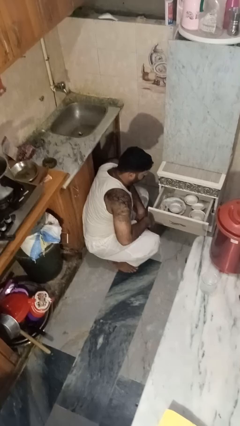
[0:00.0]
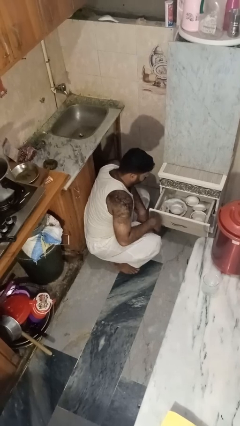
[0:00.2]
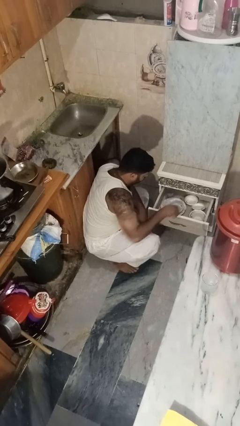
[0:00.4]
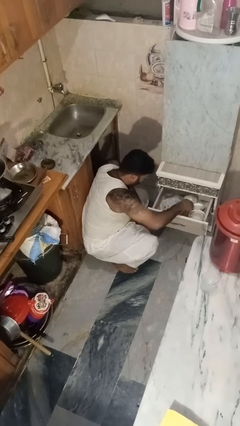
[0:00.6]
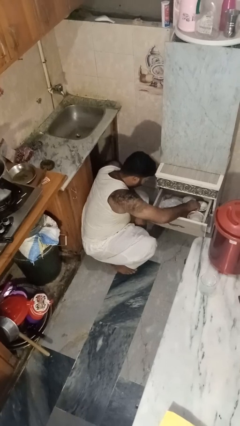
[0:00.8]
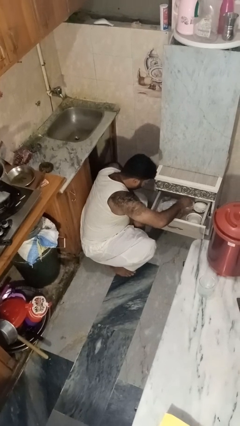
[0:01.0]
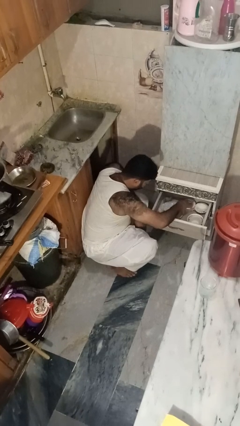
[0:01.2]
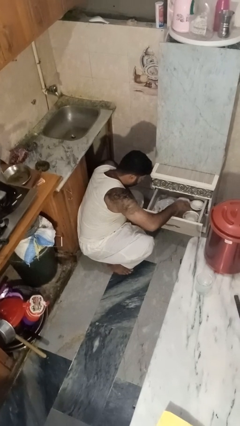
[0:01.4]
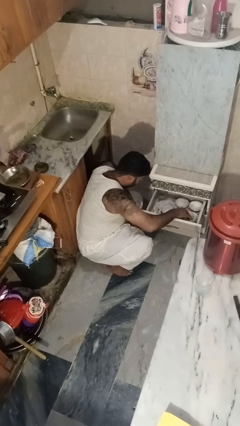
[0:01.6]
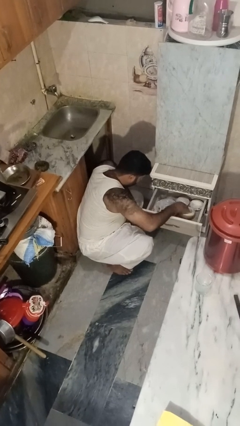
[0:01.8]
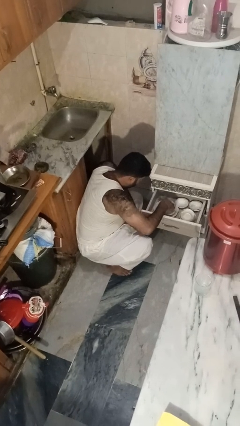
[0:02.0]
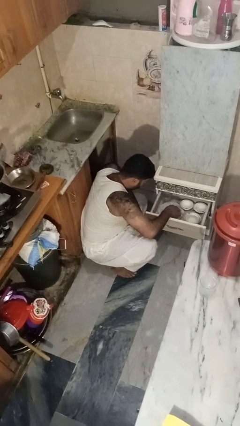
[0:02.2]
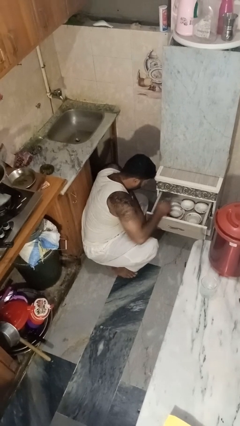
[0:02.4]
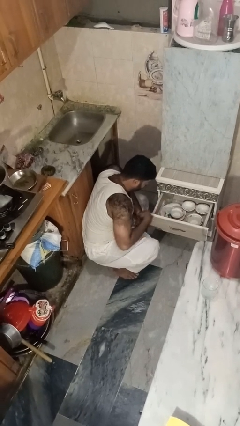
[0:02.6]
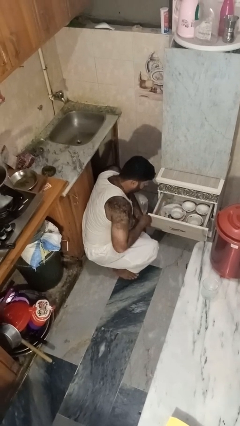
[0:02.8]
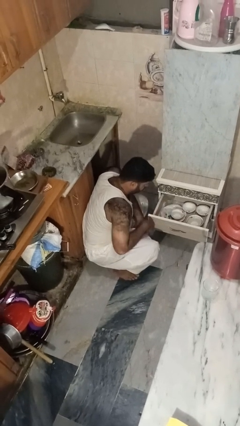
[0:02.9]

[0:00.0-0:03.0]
person searches in kitchen drawer

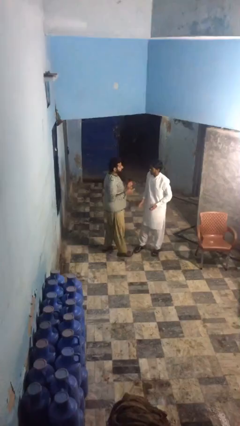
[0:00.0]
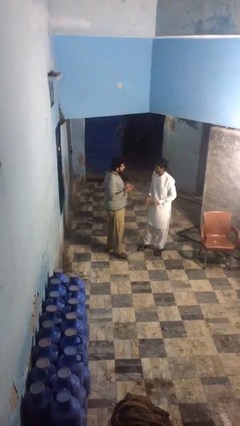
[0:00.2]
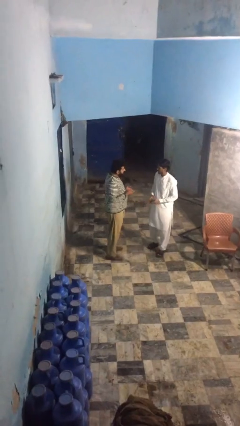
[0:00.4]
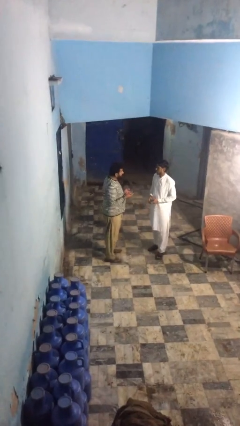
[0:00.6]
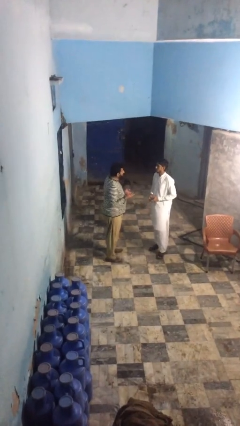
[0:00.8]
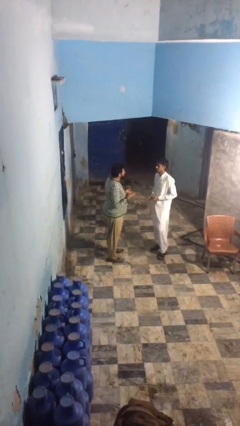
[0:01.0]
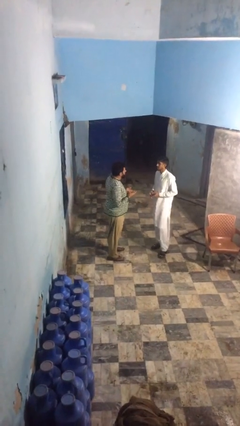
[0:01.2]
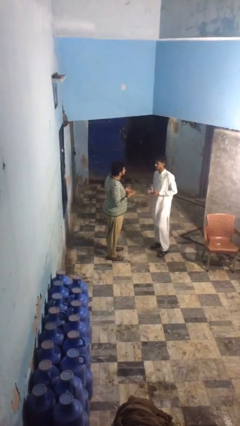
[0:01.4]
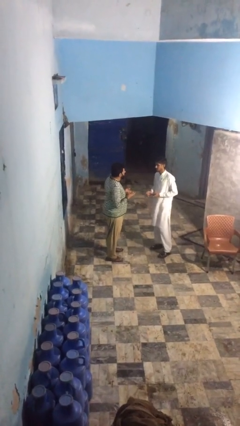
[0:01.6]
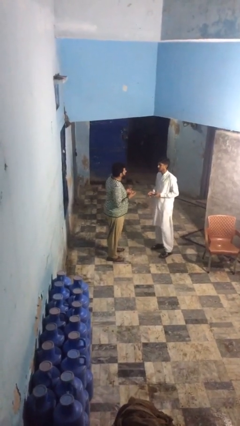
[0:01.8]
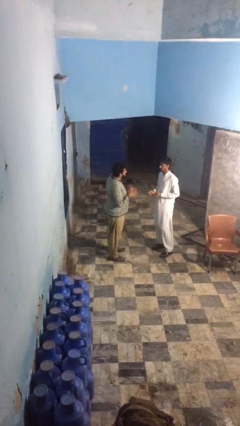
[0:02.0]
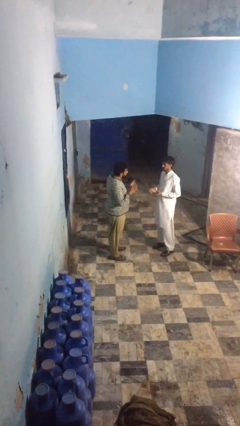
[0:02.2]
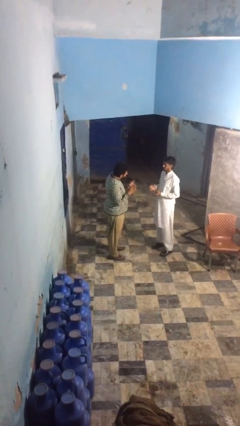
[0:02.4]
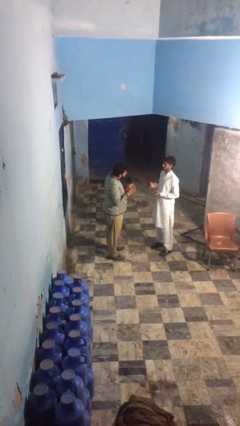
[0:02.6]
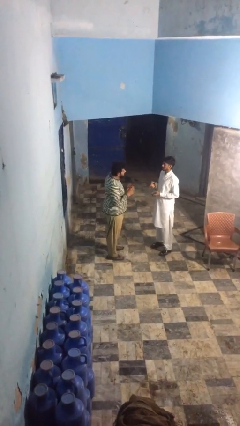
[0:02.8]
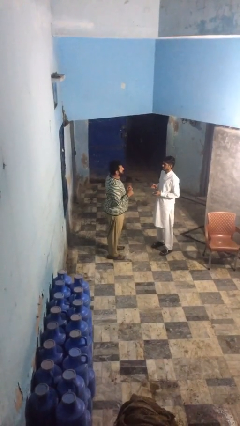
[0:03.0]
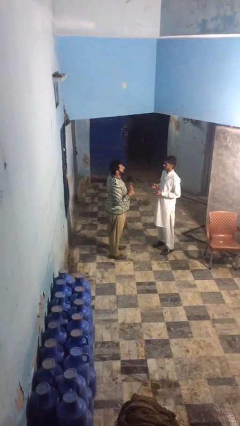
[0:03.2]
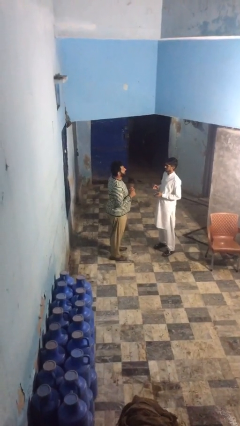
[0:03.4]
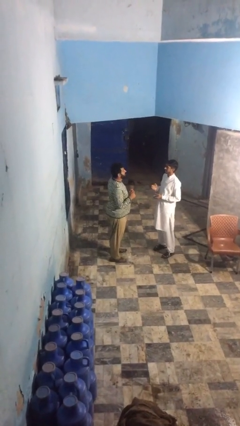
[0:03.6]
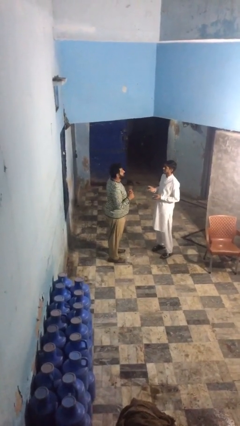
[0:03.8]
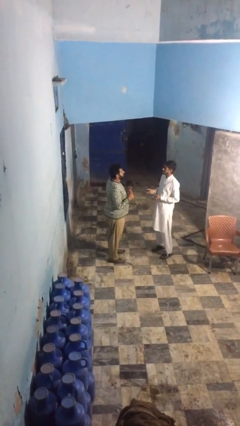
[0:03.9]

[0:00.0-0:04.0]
person talks to person

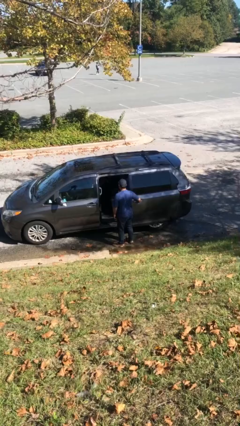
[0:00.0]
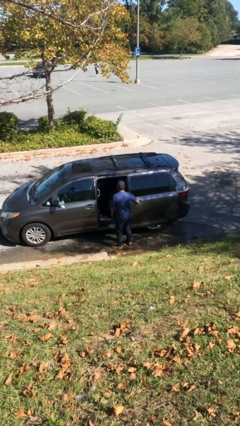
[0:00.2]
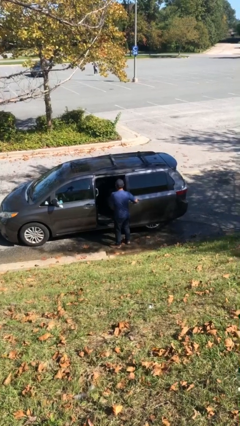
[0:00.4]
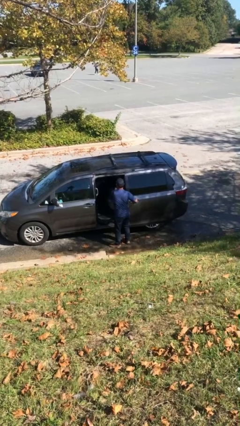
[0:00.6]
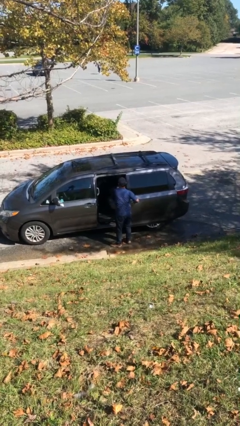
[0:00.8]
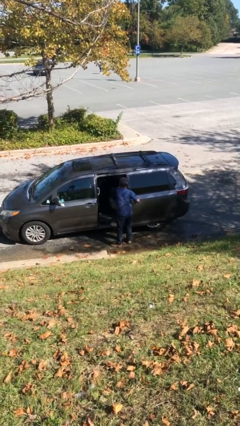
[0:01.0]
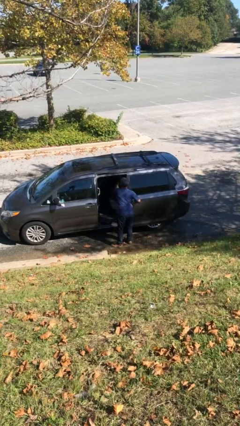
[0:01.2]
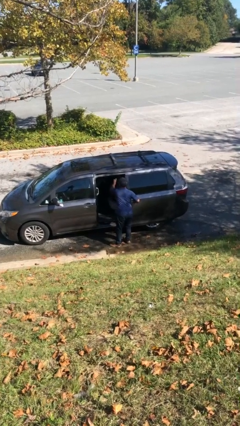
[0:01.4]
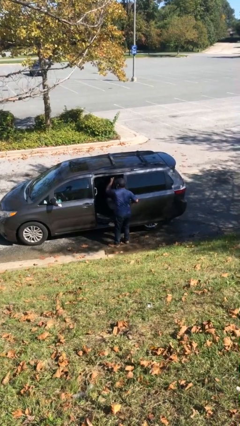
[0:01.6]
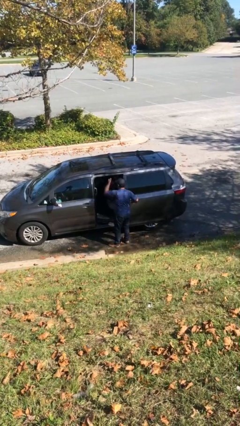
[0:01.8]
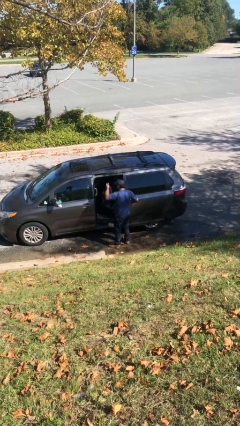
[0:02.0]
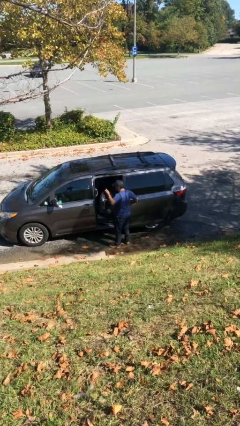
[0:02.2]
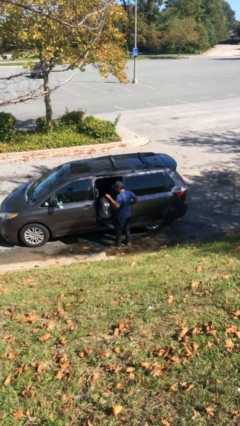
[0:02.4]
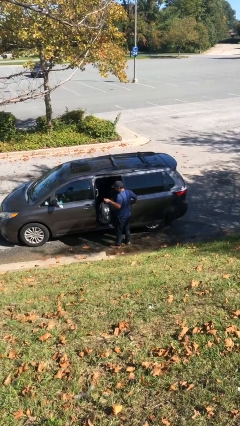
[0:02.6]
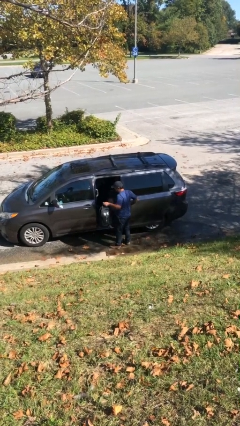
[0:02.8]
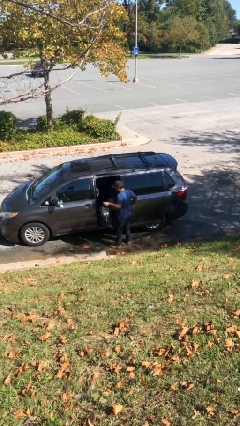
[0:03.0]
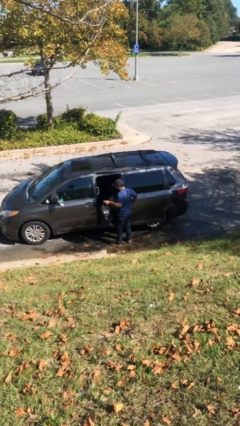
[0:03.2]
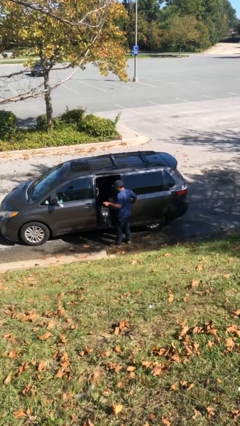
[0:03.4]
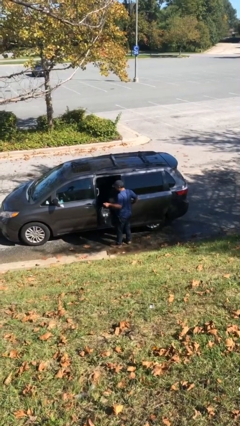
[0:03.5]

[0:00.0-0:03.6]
person unloads car

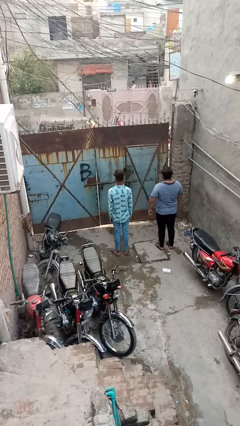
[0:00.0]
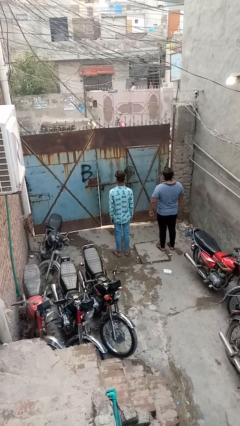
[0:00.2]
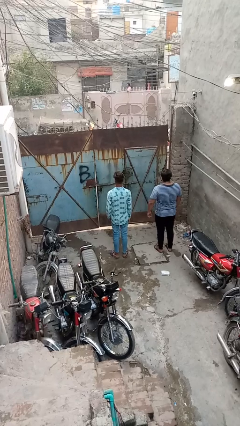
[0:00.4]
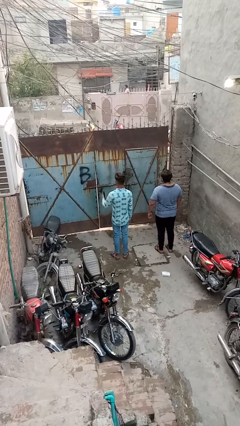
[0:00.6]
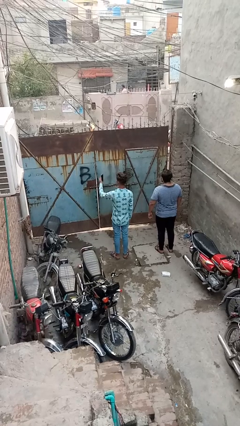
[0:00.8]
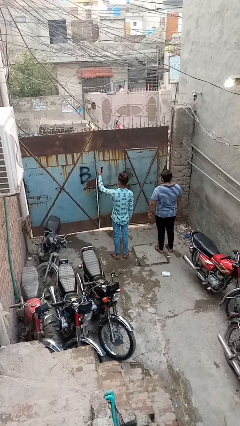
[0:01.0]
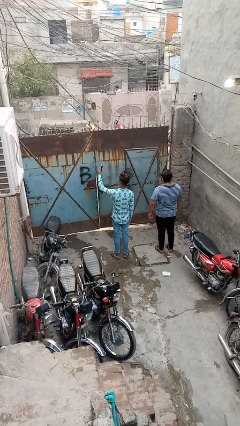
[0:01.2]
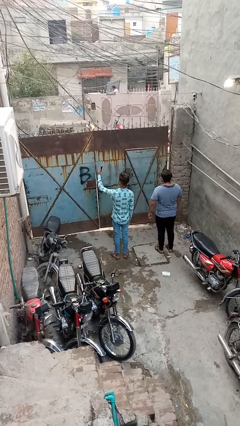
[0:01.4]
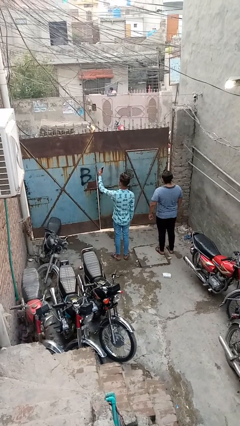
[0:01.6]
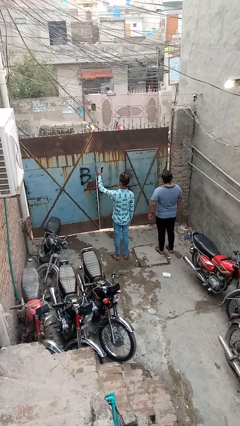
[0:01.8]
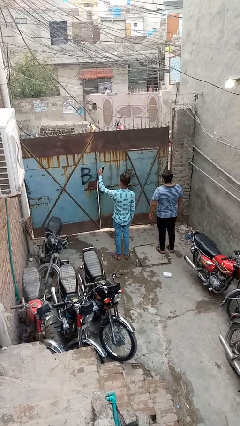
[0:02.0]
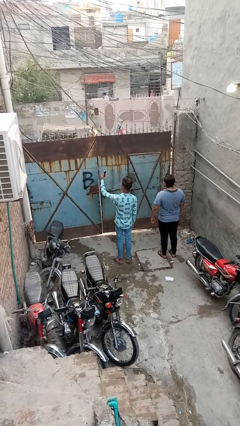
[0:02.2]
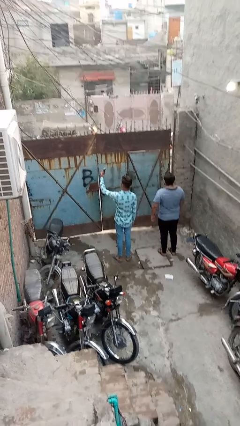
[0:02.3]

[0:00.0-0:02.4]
person takes selfie with person

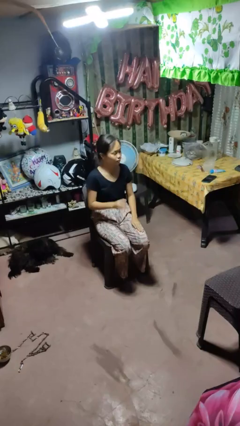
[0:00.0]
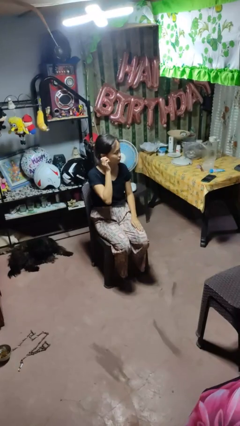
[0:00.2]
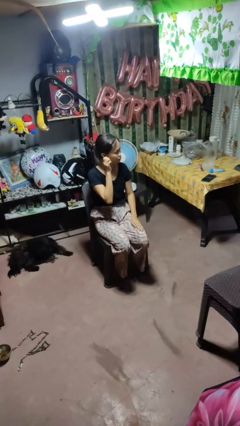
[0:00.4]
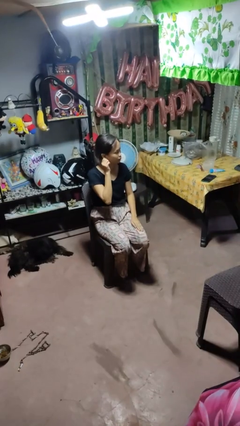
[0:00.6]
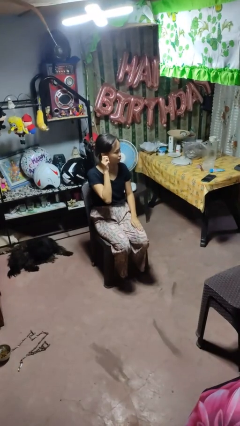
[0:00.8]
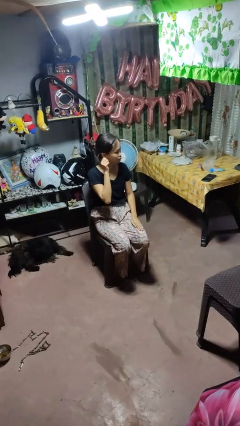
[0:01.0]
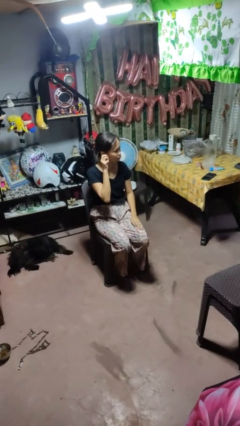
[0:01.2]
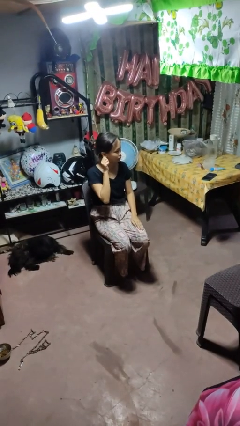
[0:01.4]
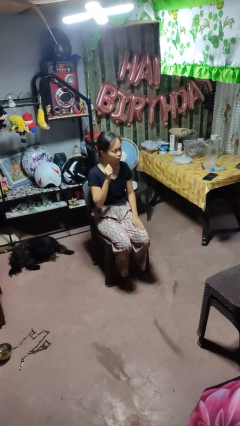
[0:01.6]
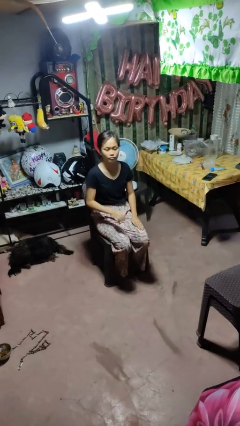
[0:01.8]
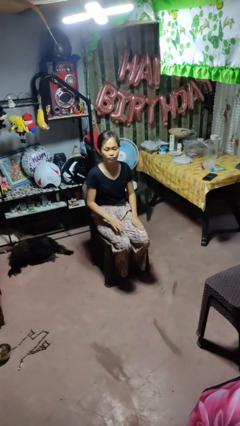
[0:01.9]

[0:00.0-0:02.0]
person touches earlobe

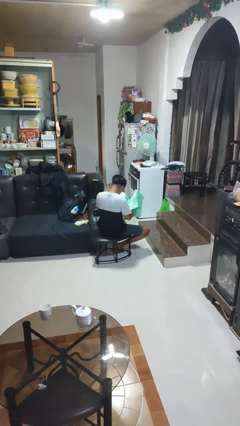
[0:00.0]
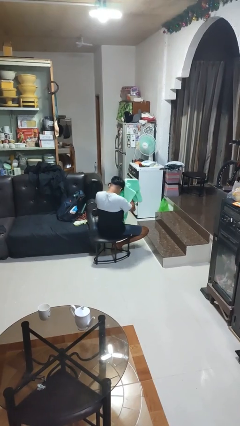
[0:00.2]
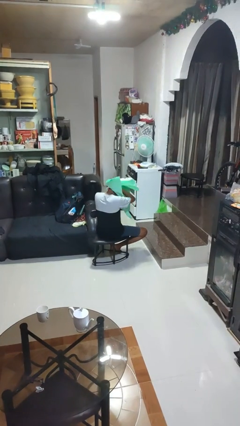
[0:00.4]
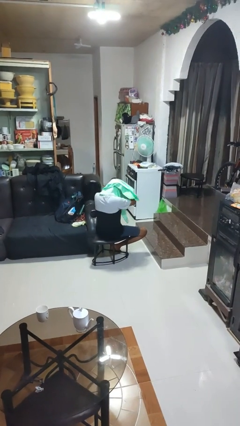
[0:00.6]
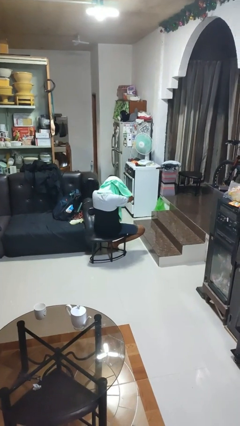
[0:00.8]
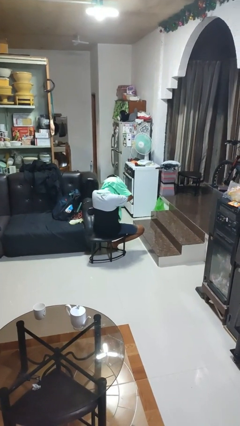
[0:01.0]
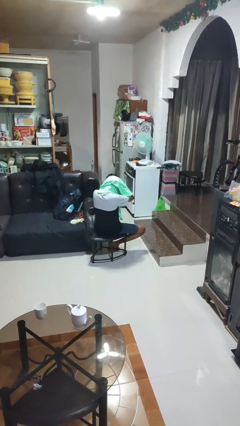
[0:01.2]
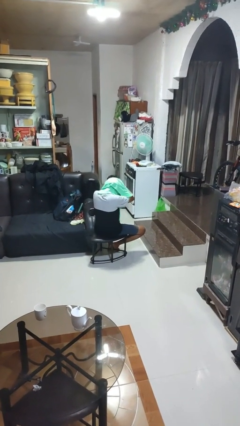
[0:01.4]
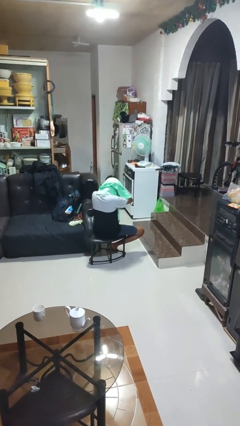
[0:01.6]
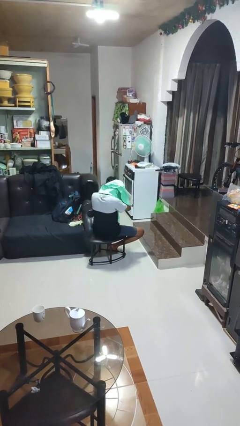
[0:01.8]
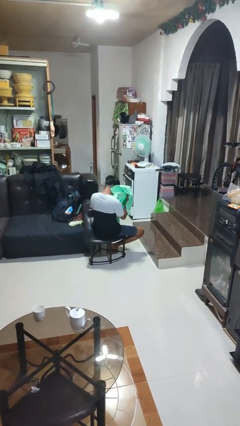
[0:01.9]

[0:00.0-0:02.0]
person dries hair with towel

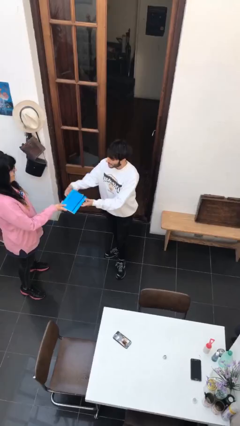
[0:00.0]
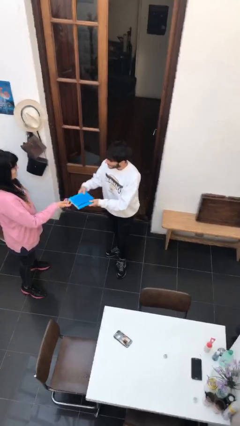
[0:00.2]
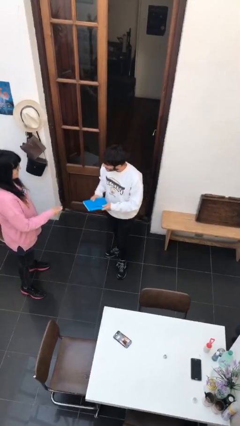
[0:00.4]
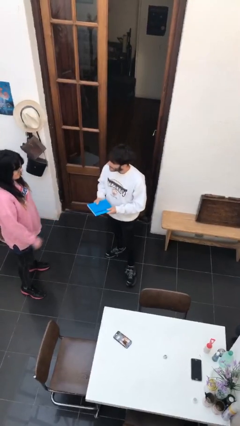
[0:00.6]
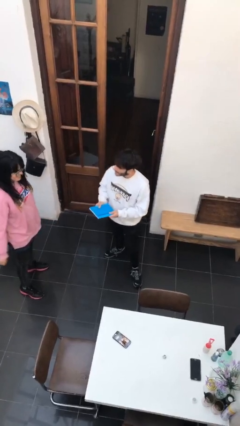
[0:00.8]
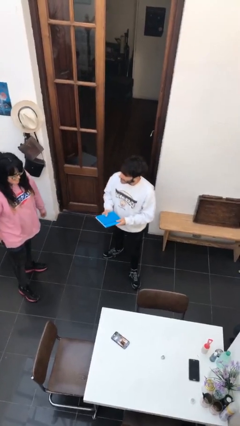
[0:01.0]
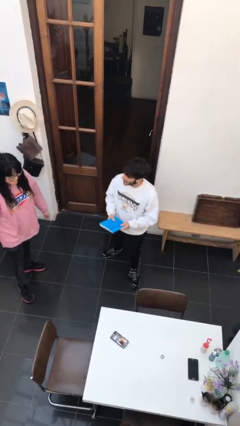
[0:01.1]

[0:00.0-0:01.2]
person transfers object to person
